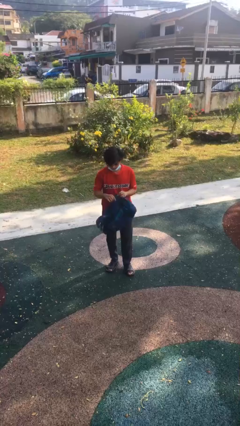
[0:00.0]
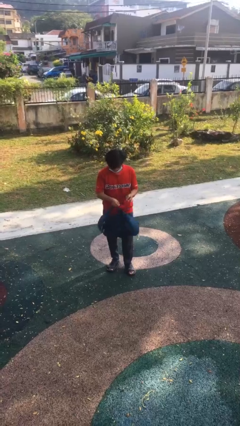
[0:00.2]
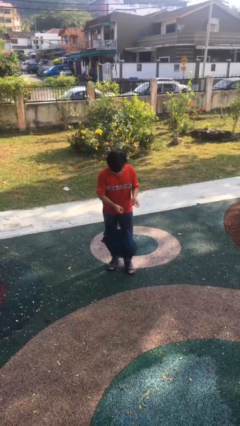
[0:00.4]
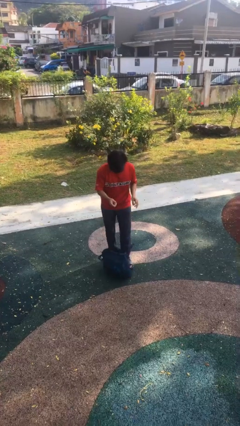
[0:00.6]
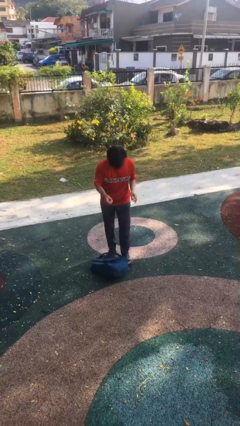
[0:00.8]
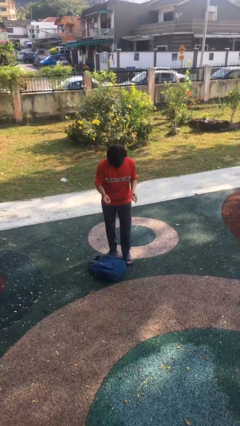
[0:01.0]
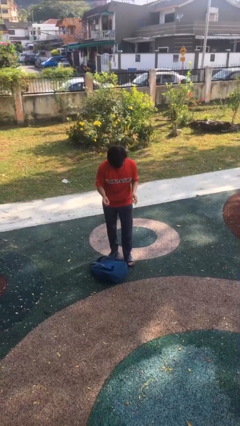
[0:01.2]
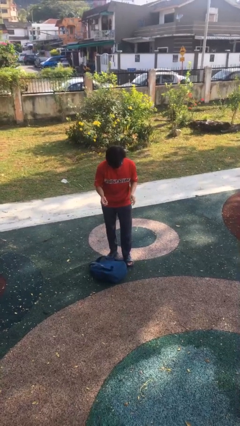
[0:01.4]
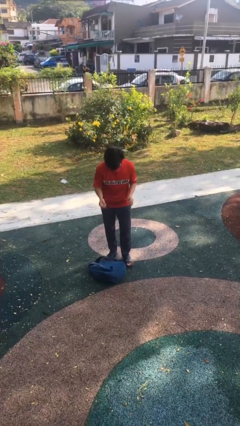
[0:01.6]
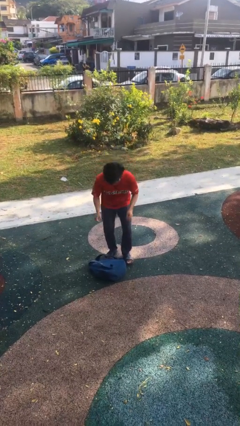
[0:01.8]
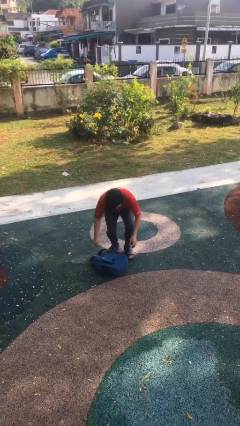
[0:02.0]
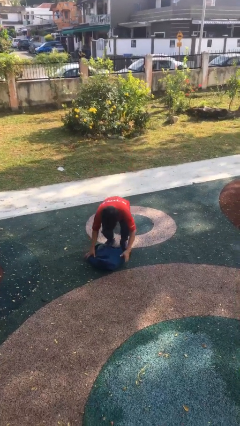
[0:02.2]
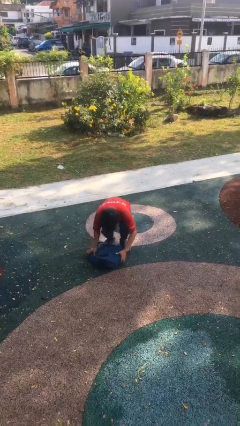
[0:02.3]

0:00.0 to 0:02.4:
person drops object

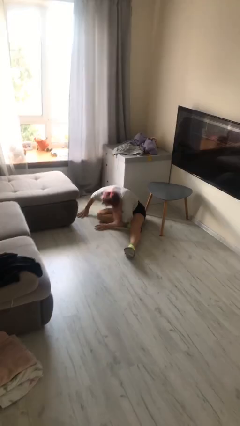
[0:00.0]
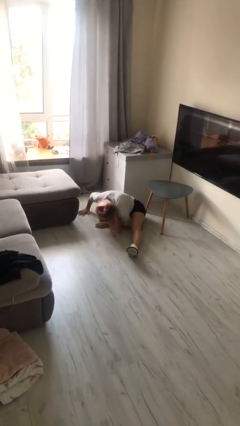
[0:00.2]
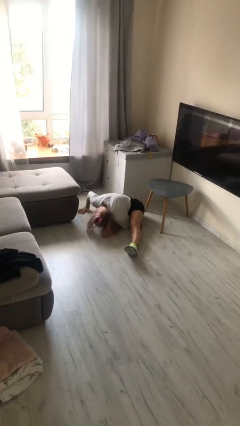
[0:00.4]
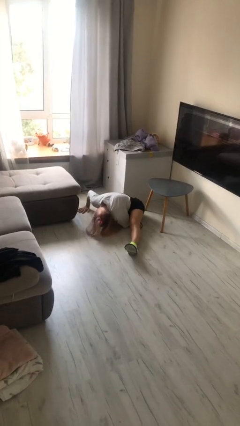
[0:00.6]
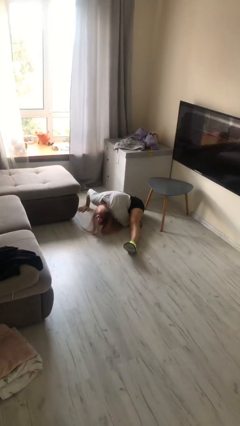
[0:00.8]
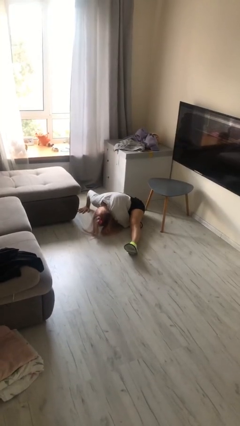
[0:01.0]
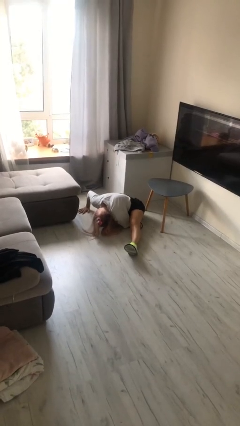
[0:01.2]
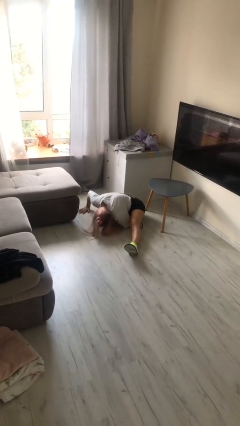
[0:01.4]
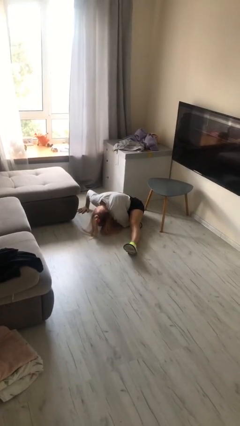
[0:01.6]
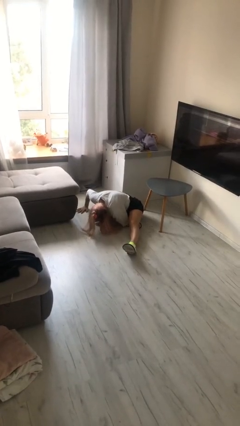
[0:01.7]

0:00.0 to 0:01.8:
person searches under couch

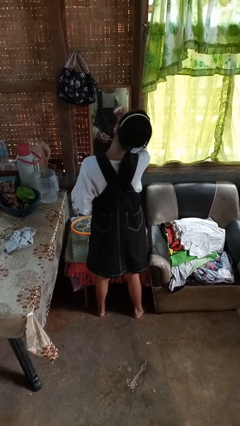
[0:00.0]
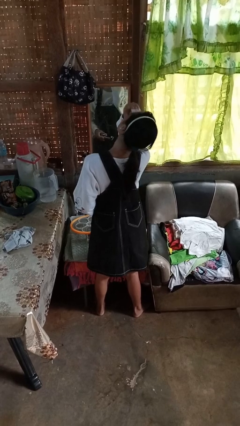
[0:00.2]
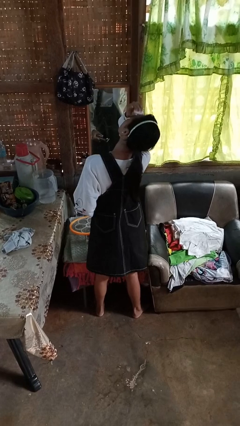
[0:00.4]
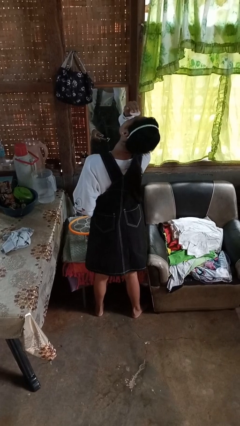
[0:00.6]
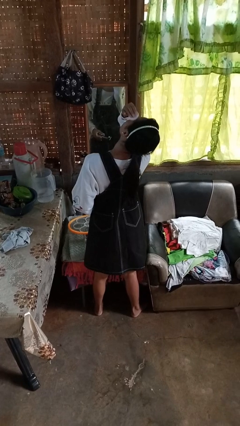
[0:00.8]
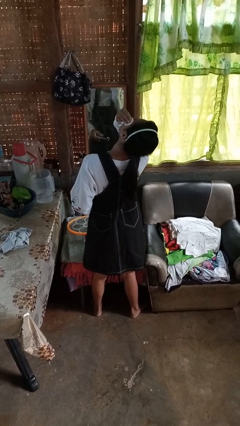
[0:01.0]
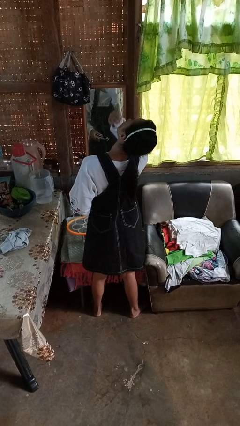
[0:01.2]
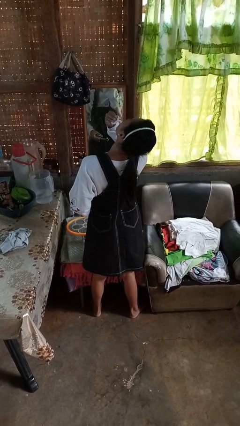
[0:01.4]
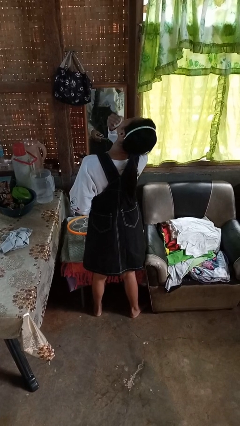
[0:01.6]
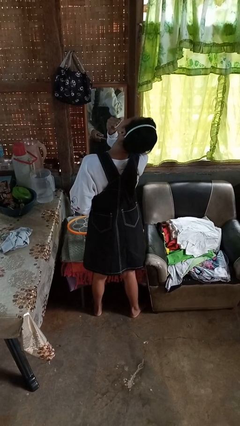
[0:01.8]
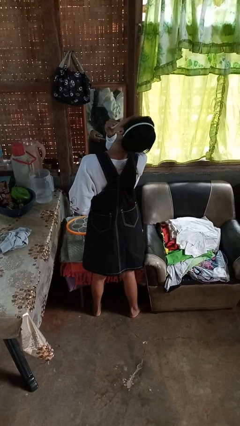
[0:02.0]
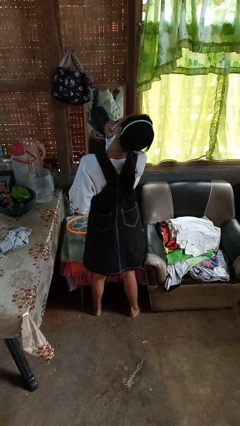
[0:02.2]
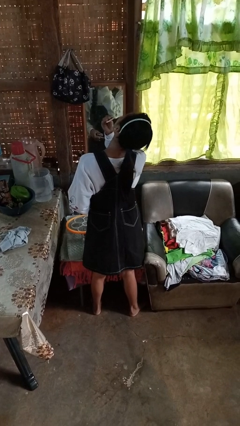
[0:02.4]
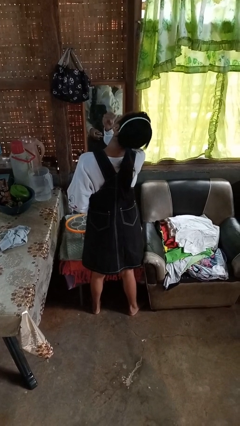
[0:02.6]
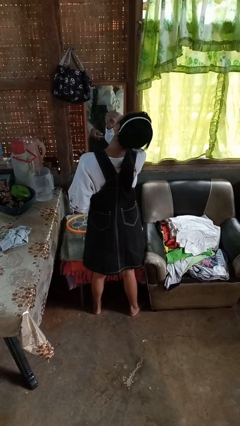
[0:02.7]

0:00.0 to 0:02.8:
person applies foundation makeup

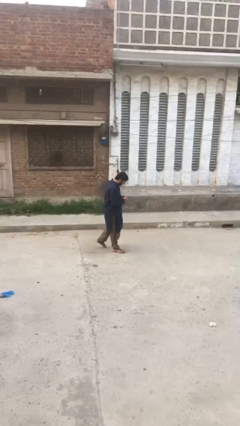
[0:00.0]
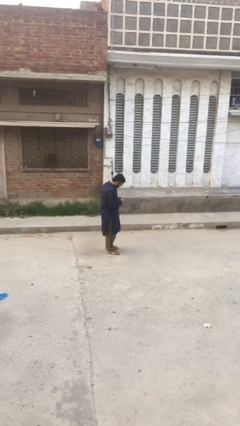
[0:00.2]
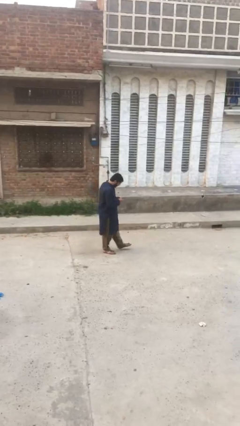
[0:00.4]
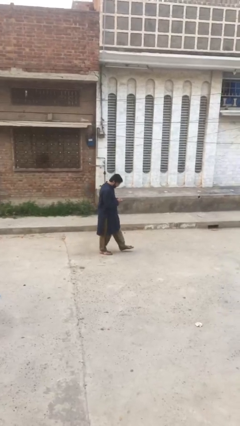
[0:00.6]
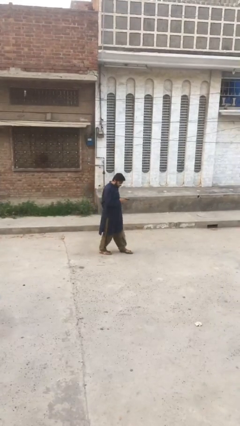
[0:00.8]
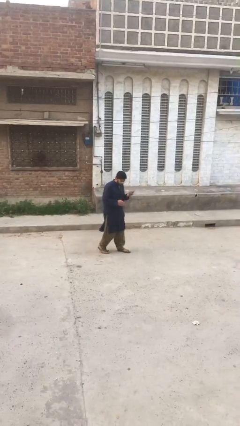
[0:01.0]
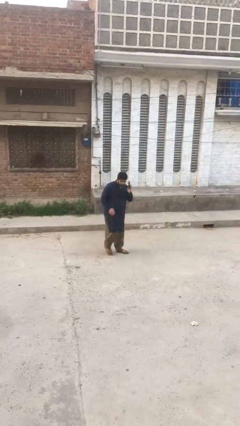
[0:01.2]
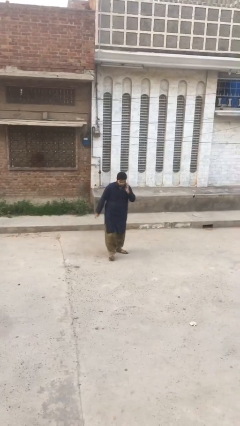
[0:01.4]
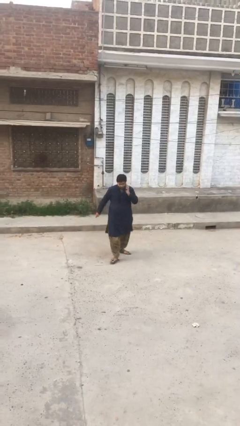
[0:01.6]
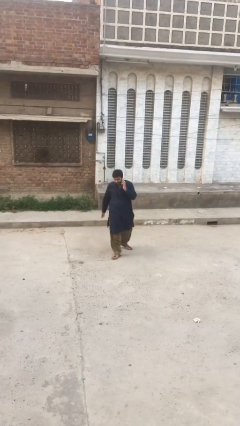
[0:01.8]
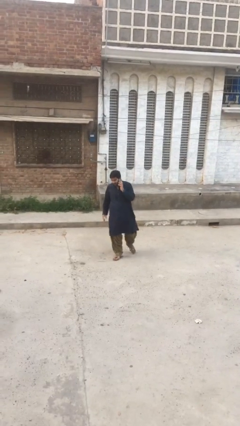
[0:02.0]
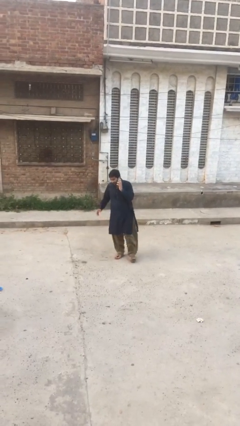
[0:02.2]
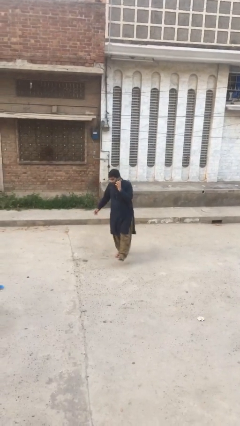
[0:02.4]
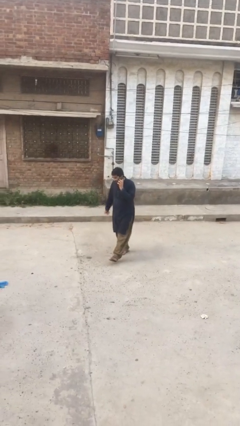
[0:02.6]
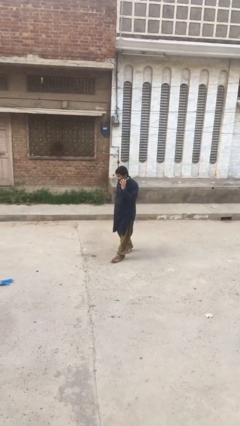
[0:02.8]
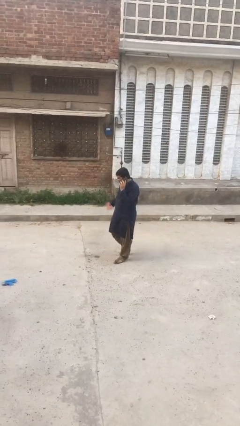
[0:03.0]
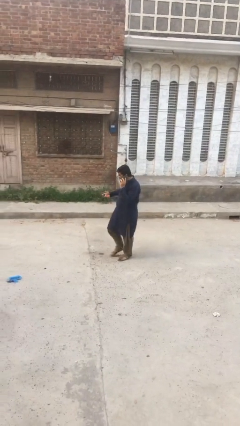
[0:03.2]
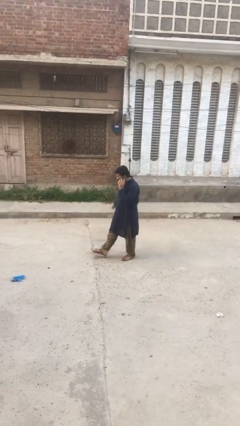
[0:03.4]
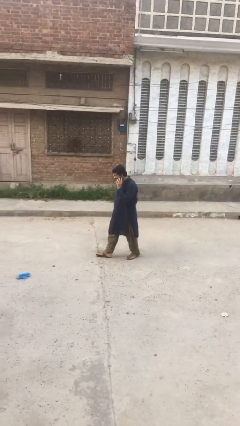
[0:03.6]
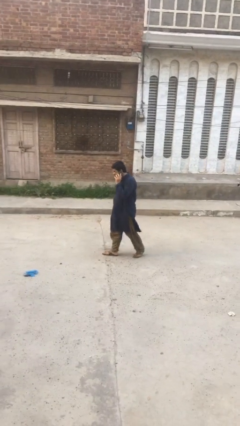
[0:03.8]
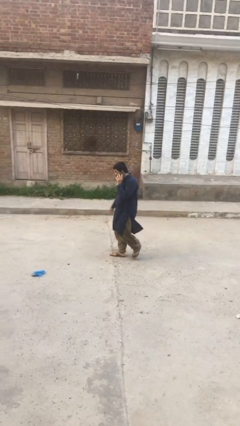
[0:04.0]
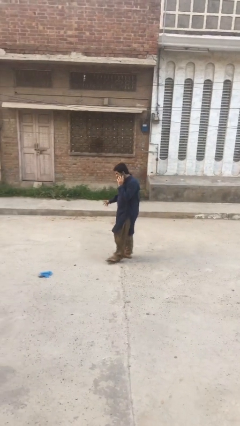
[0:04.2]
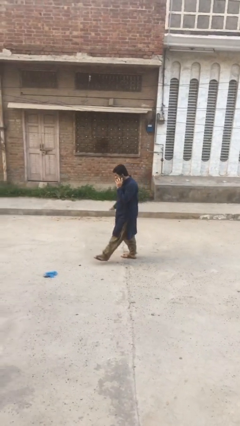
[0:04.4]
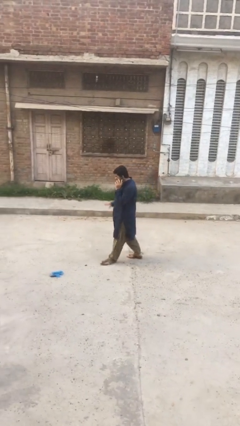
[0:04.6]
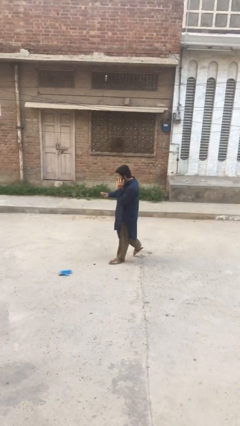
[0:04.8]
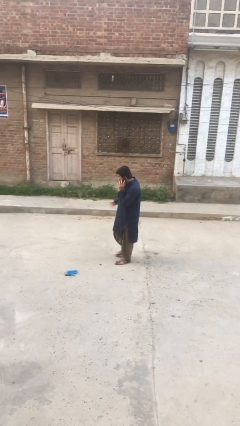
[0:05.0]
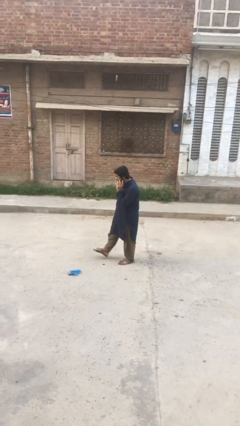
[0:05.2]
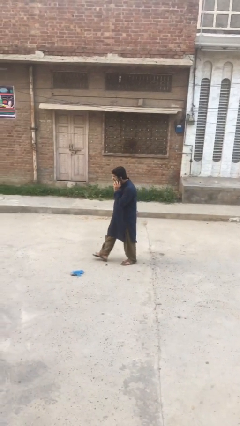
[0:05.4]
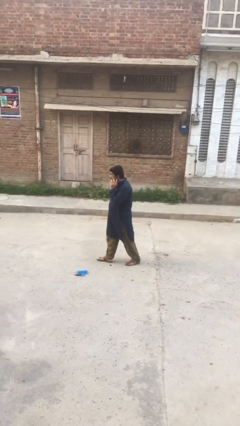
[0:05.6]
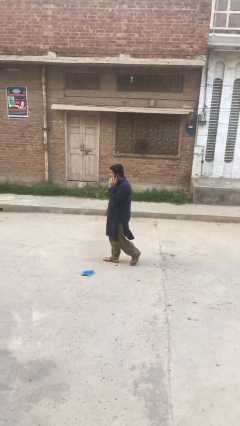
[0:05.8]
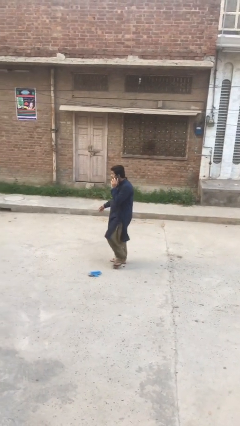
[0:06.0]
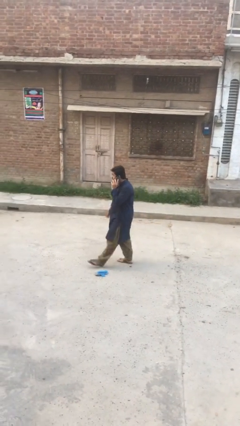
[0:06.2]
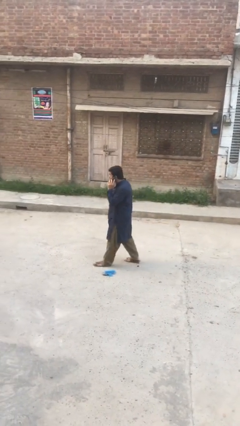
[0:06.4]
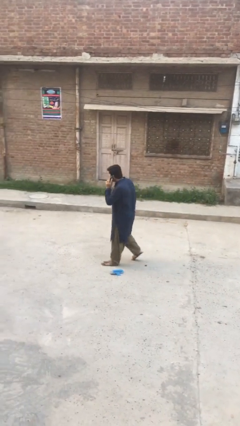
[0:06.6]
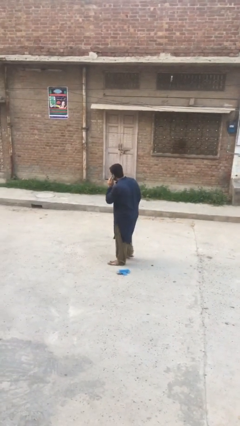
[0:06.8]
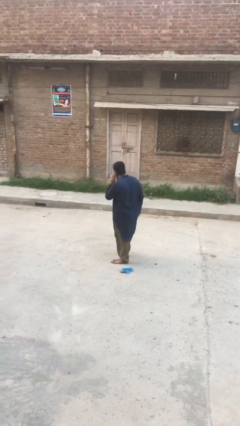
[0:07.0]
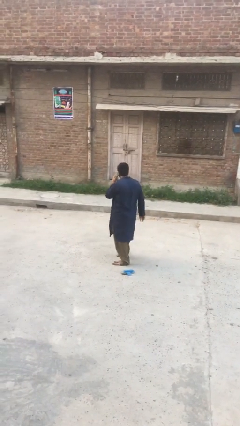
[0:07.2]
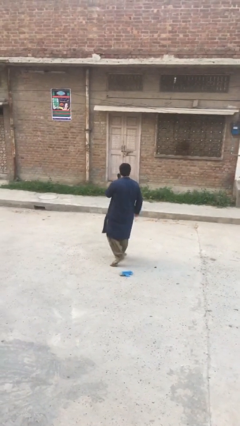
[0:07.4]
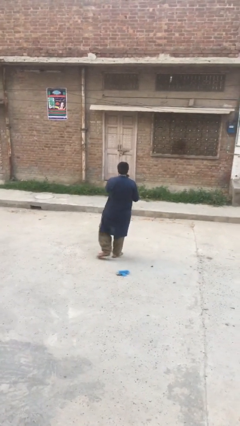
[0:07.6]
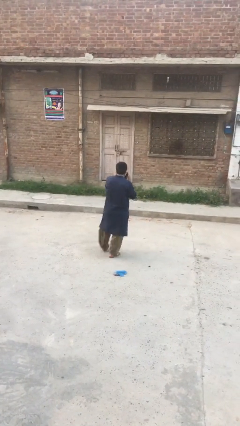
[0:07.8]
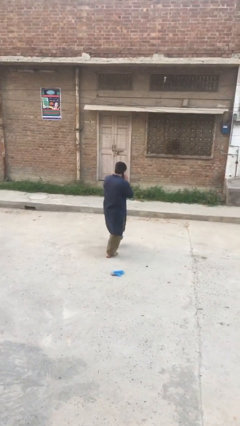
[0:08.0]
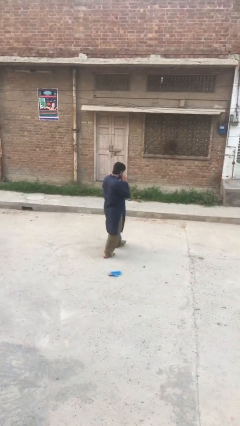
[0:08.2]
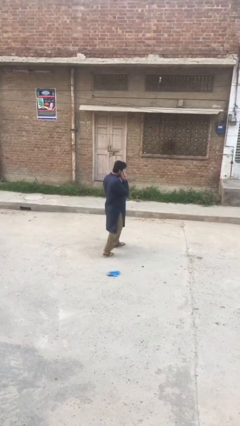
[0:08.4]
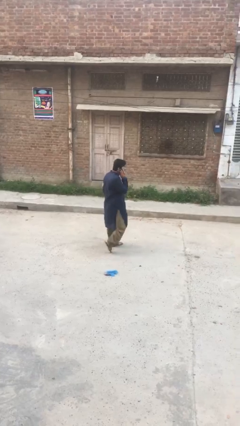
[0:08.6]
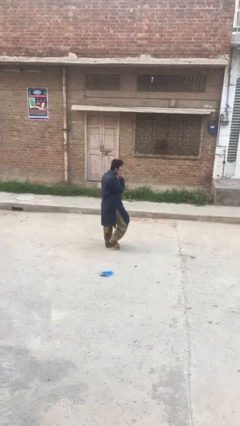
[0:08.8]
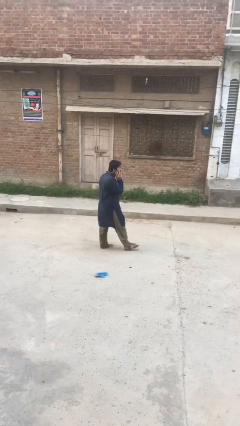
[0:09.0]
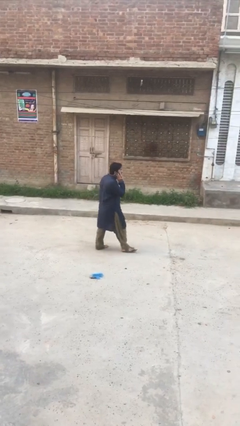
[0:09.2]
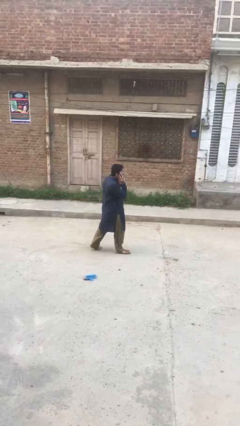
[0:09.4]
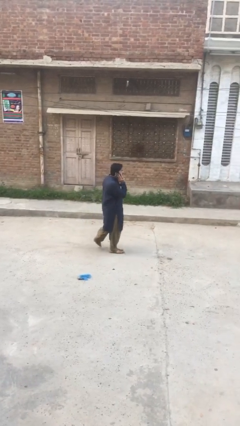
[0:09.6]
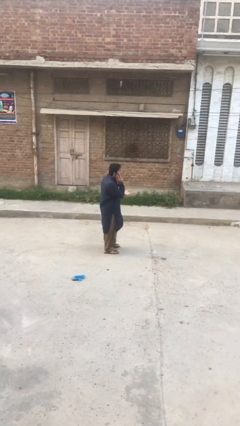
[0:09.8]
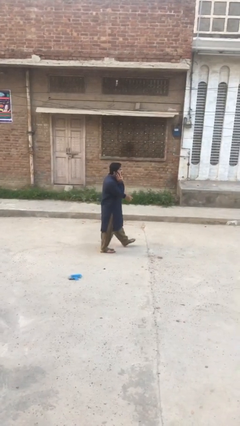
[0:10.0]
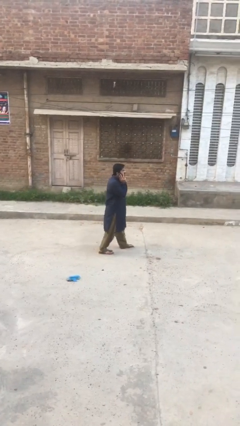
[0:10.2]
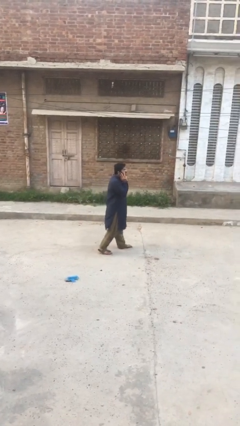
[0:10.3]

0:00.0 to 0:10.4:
person talks on phone
